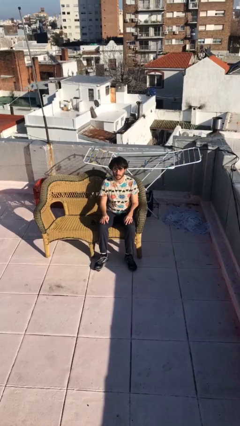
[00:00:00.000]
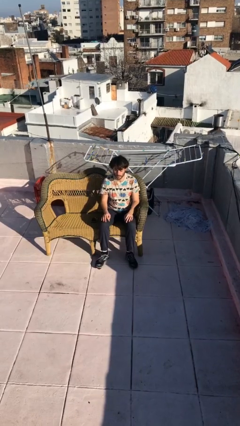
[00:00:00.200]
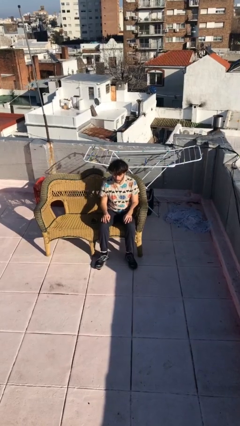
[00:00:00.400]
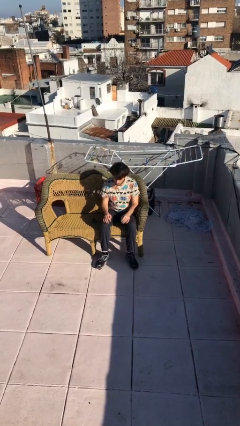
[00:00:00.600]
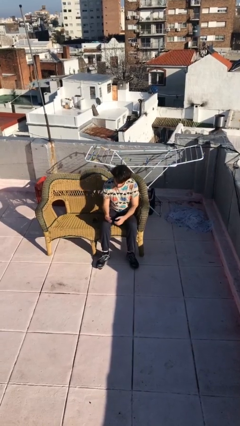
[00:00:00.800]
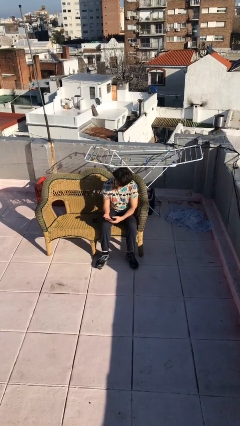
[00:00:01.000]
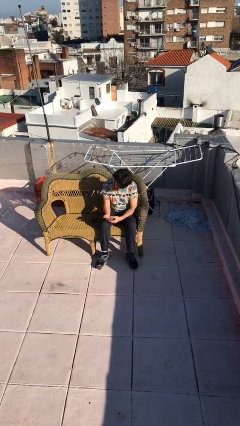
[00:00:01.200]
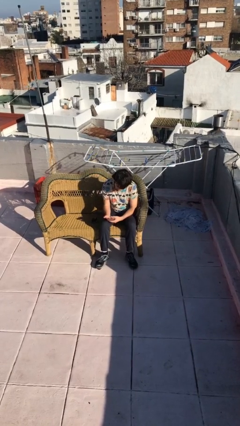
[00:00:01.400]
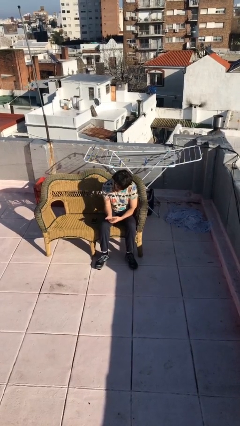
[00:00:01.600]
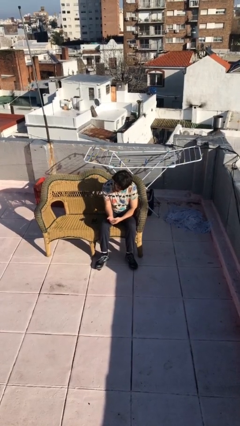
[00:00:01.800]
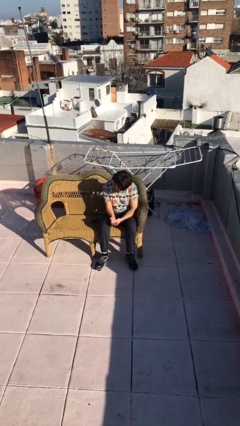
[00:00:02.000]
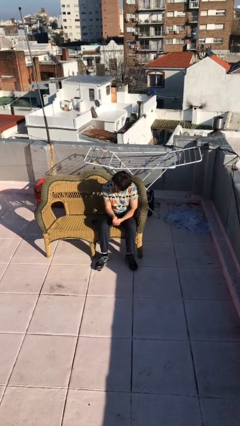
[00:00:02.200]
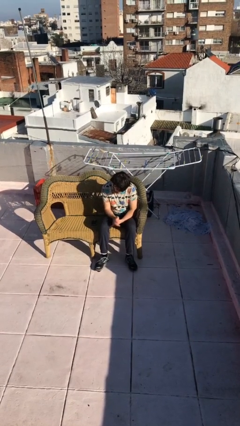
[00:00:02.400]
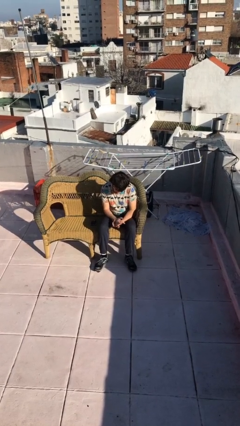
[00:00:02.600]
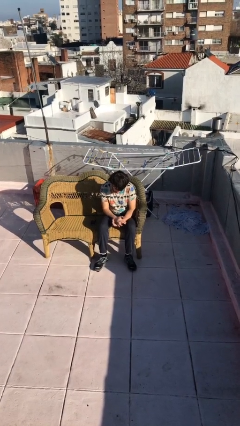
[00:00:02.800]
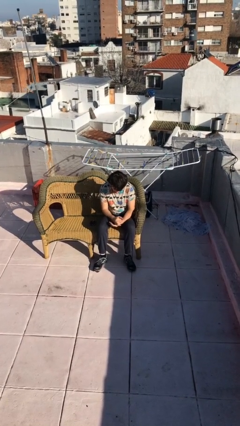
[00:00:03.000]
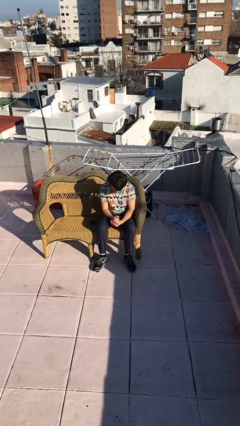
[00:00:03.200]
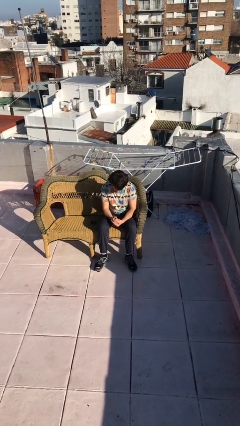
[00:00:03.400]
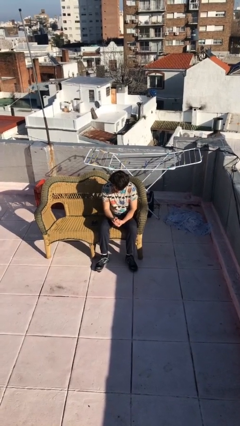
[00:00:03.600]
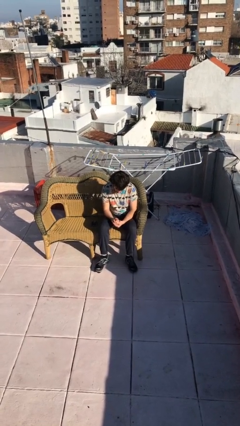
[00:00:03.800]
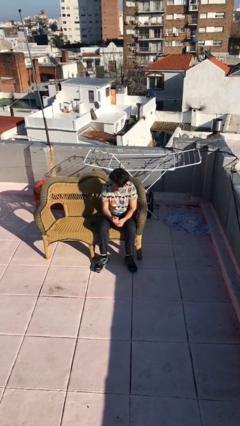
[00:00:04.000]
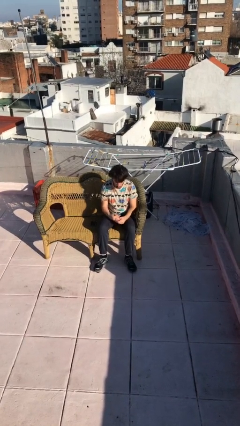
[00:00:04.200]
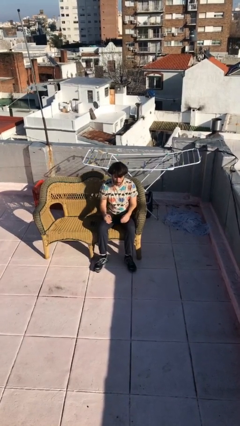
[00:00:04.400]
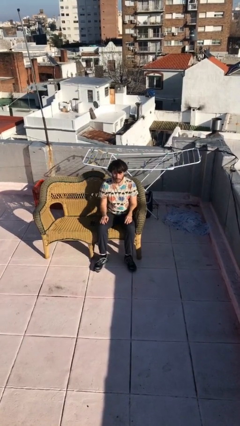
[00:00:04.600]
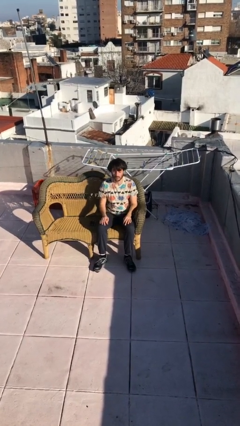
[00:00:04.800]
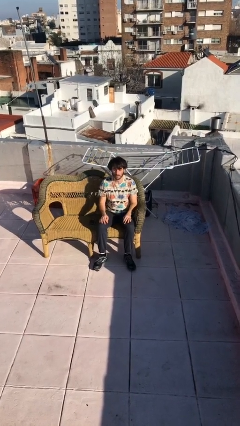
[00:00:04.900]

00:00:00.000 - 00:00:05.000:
person looks at hands in lap

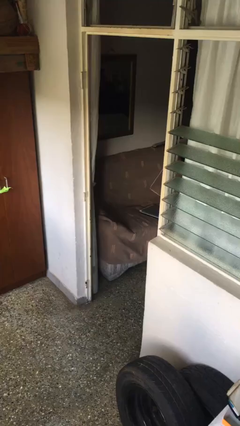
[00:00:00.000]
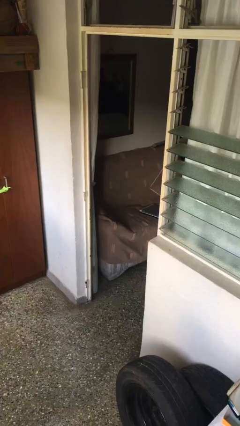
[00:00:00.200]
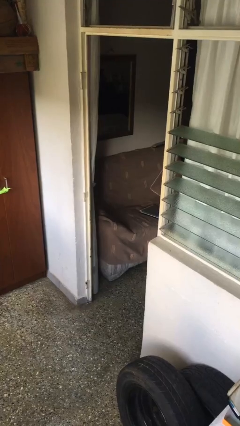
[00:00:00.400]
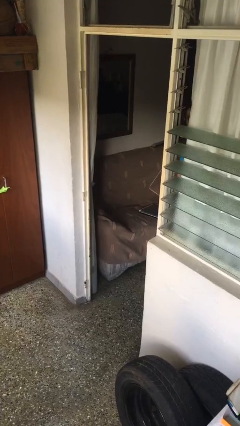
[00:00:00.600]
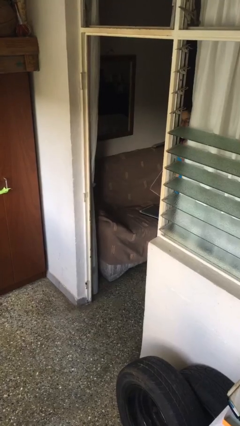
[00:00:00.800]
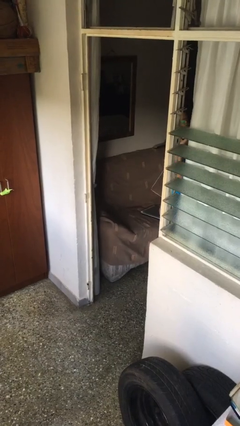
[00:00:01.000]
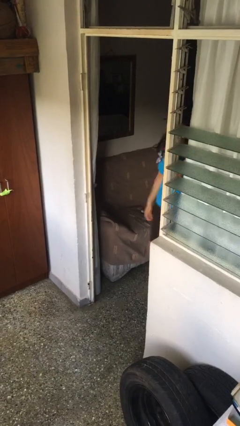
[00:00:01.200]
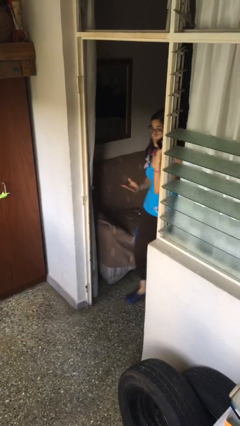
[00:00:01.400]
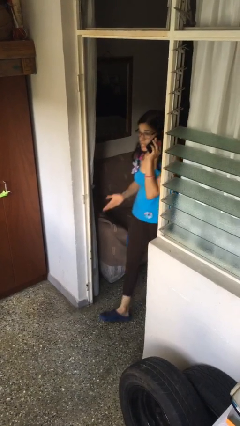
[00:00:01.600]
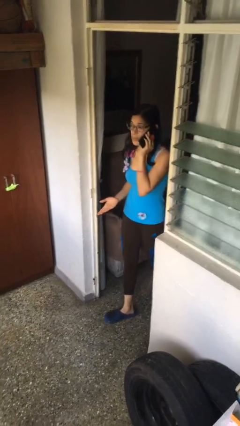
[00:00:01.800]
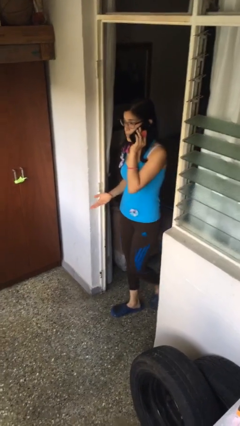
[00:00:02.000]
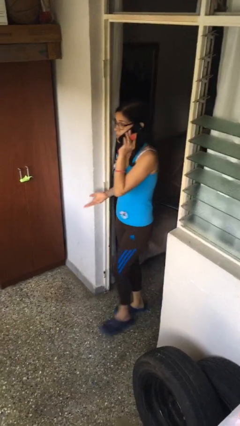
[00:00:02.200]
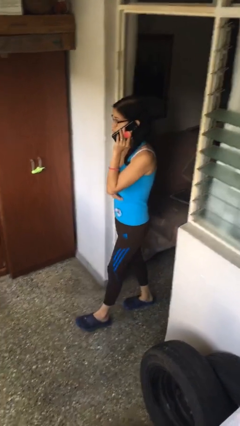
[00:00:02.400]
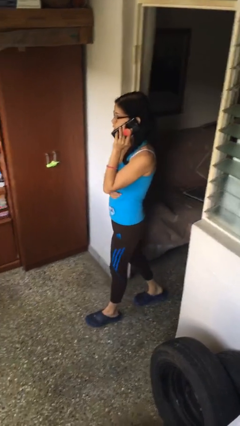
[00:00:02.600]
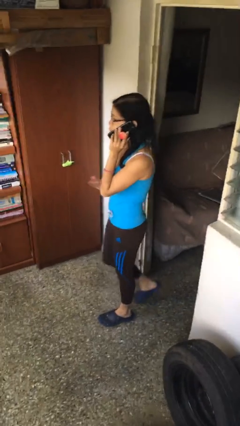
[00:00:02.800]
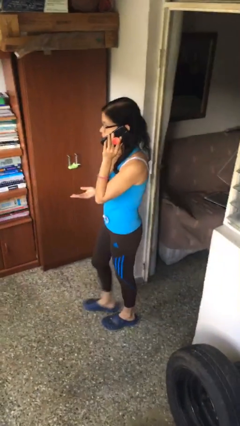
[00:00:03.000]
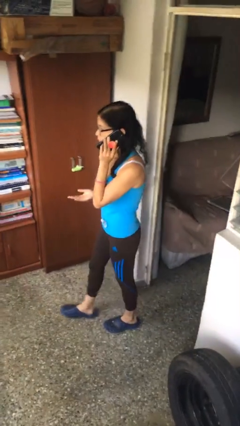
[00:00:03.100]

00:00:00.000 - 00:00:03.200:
person enters scene through structure

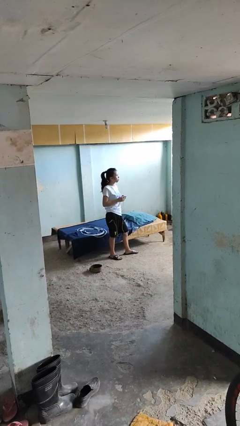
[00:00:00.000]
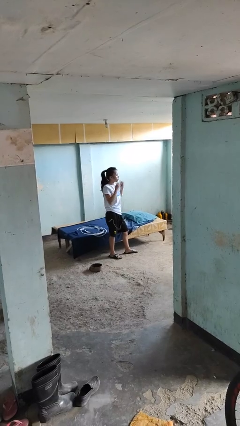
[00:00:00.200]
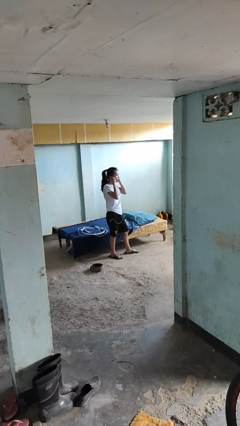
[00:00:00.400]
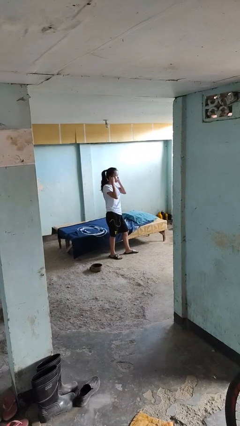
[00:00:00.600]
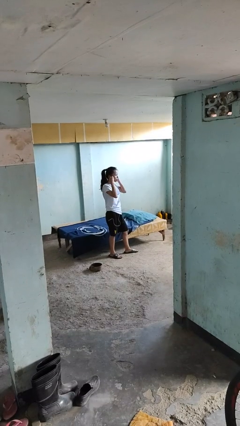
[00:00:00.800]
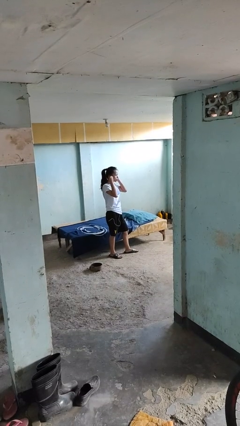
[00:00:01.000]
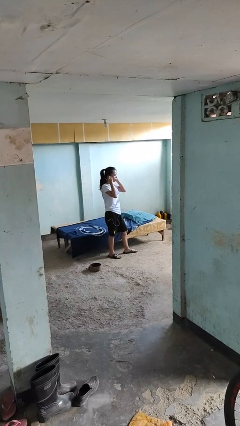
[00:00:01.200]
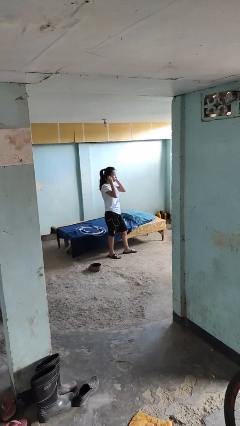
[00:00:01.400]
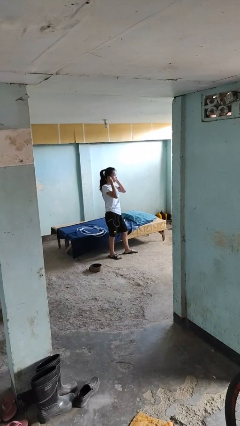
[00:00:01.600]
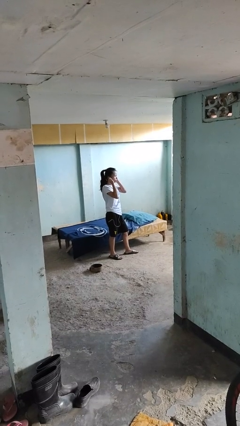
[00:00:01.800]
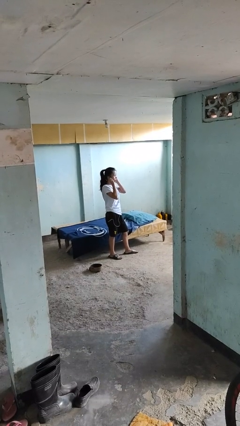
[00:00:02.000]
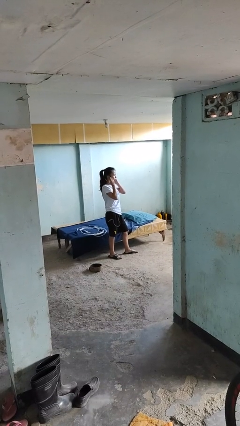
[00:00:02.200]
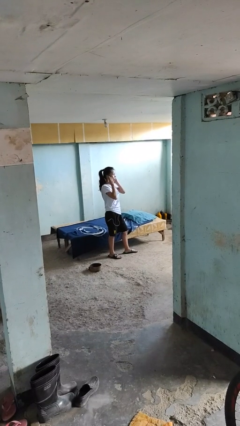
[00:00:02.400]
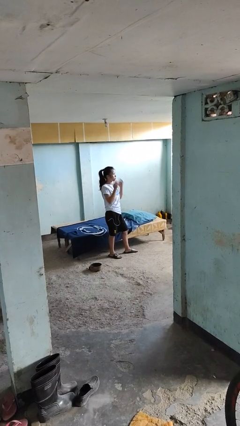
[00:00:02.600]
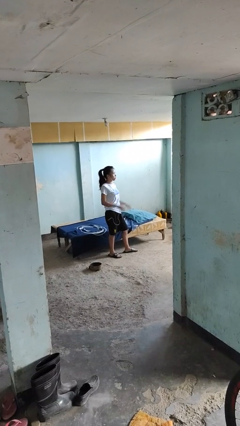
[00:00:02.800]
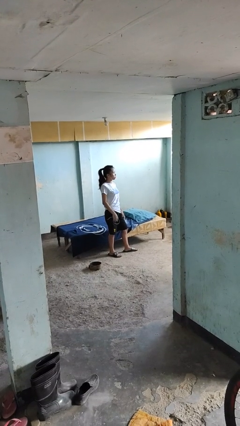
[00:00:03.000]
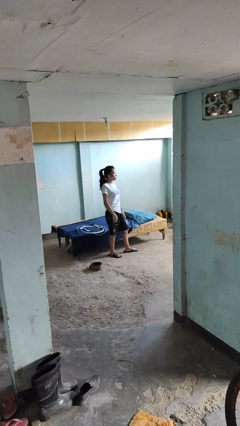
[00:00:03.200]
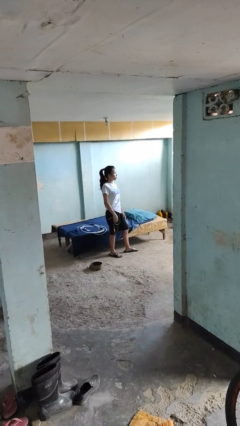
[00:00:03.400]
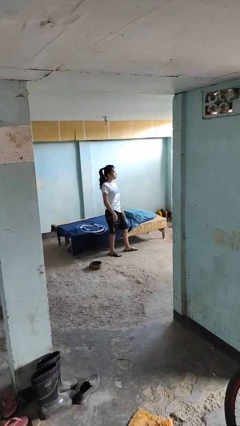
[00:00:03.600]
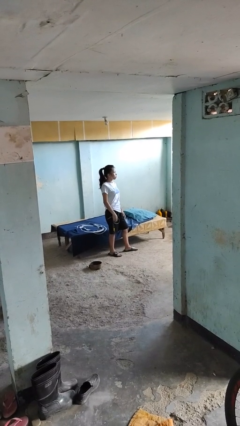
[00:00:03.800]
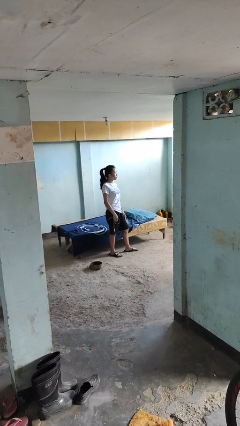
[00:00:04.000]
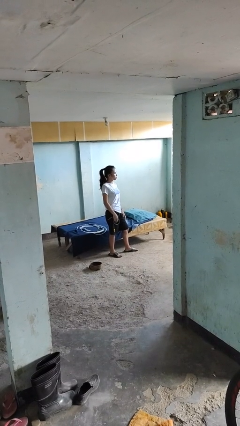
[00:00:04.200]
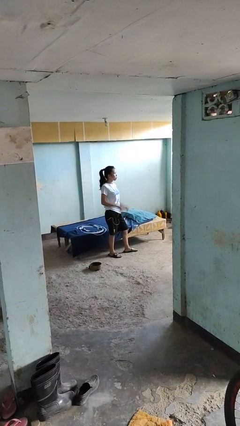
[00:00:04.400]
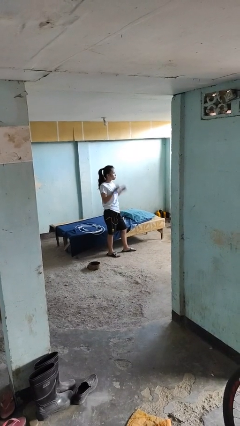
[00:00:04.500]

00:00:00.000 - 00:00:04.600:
person puts on headphones

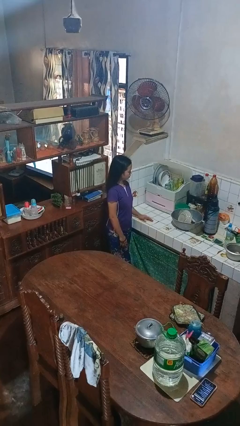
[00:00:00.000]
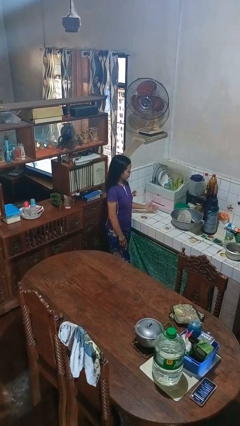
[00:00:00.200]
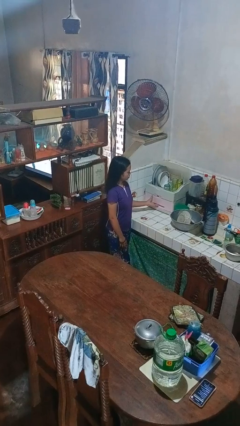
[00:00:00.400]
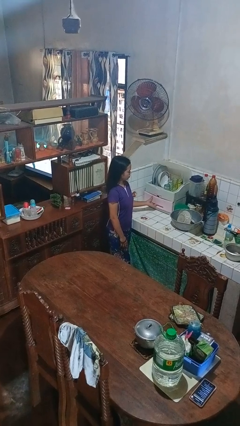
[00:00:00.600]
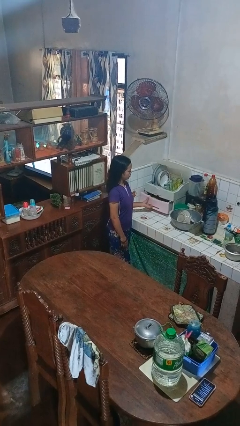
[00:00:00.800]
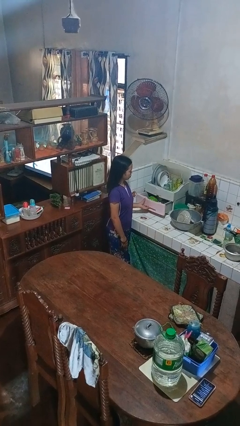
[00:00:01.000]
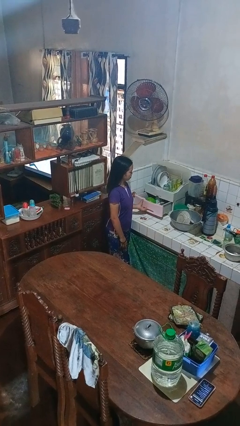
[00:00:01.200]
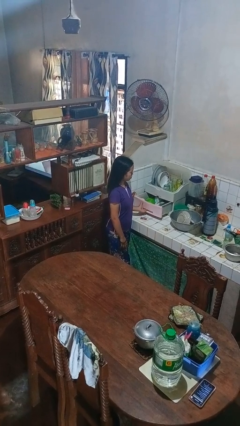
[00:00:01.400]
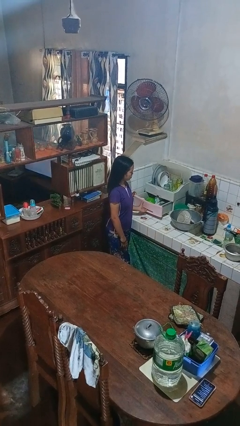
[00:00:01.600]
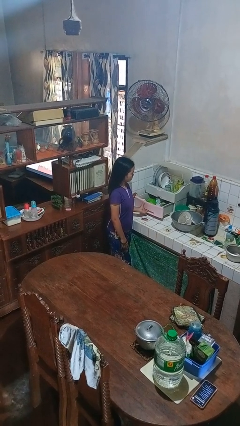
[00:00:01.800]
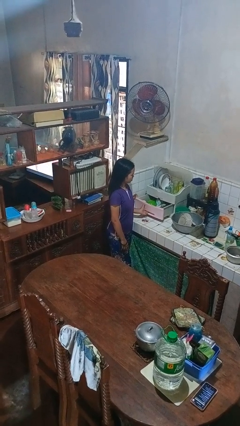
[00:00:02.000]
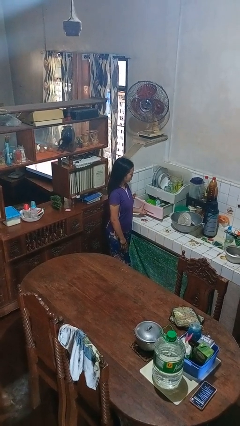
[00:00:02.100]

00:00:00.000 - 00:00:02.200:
person opens kitchen drawer

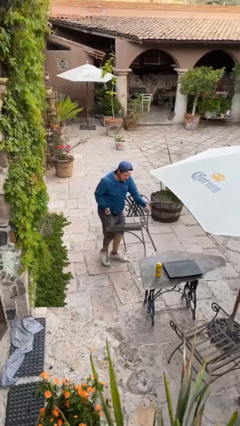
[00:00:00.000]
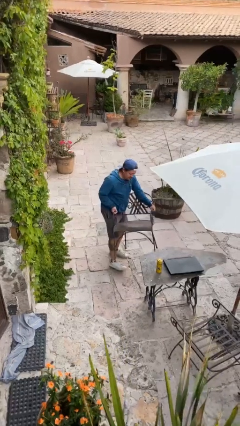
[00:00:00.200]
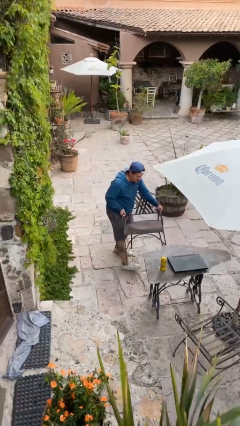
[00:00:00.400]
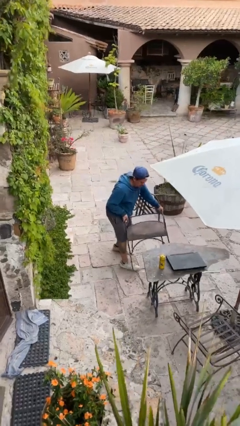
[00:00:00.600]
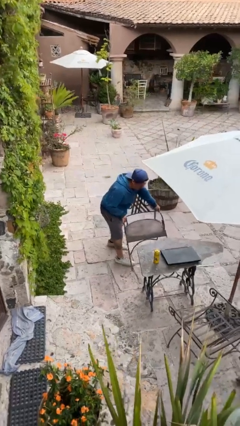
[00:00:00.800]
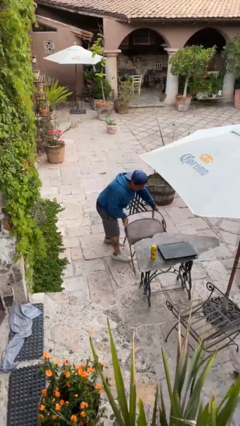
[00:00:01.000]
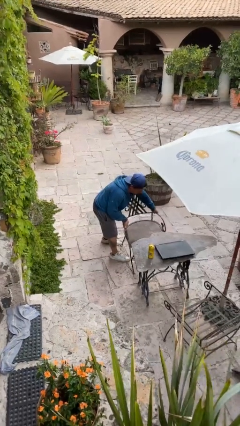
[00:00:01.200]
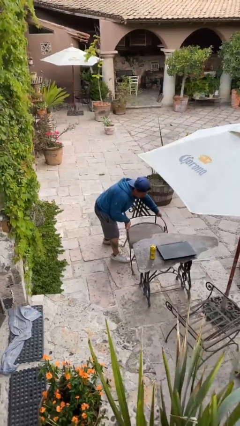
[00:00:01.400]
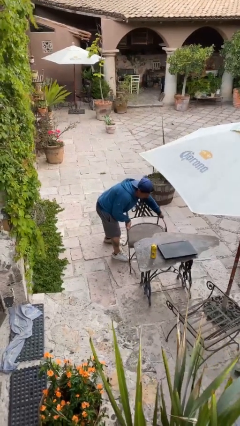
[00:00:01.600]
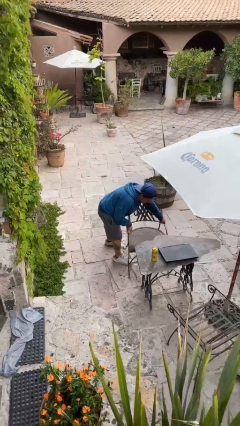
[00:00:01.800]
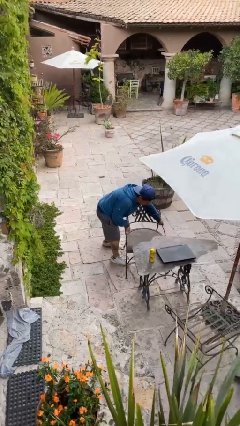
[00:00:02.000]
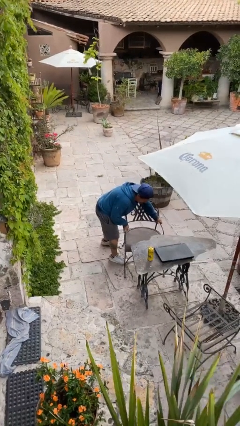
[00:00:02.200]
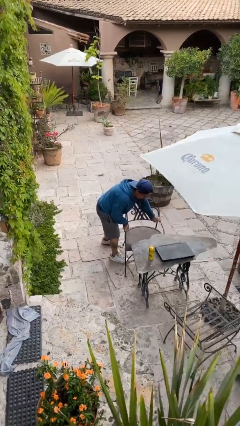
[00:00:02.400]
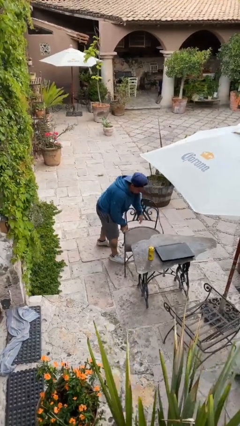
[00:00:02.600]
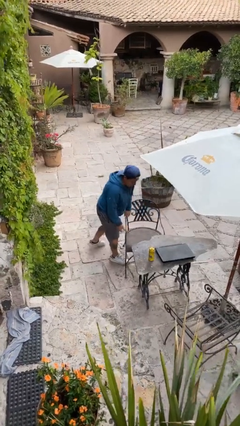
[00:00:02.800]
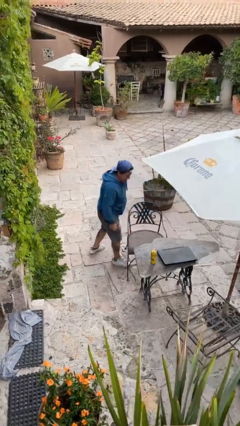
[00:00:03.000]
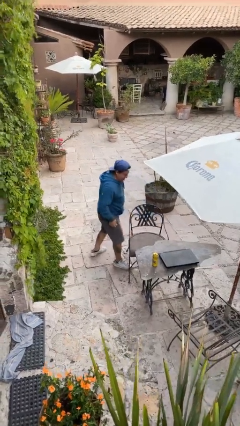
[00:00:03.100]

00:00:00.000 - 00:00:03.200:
person puts down object on floor
